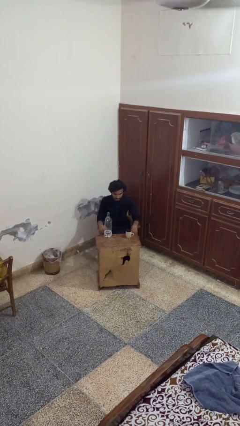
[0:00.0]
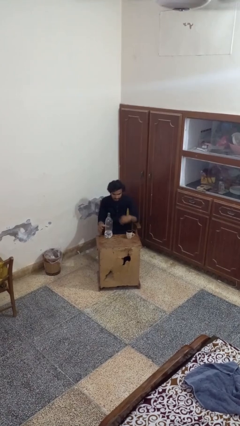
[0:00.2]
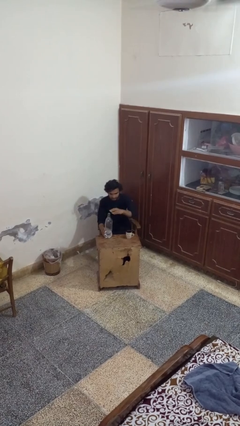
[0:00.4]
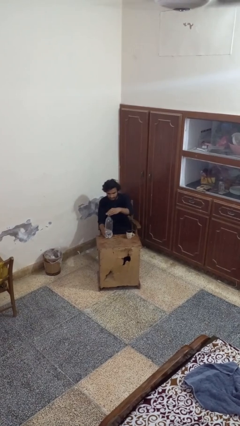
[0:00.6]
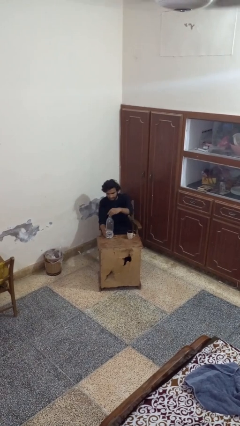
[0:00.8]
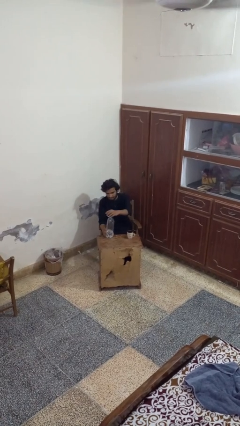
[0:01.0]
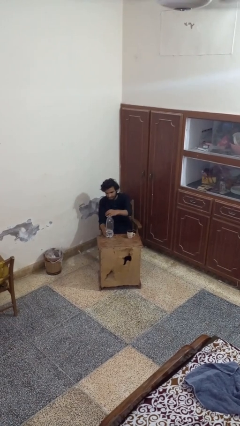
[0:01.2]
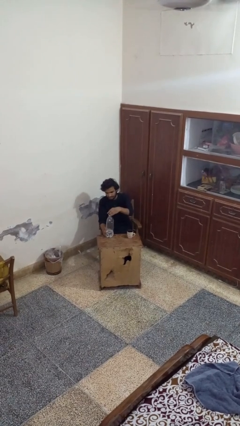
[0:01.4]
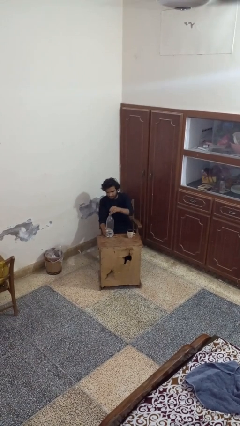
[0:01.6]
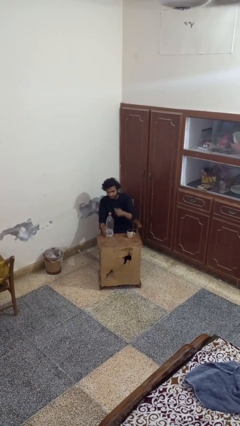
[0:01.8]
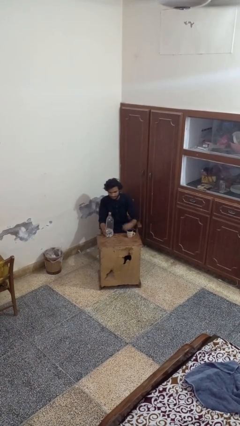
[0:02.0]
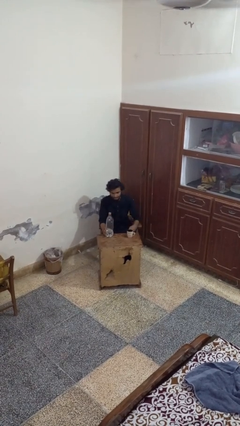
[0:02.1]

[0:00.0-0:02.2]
person unscrews lid from bottle

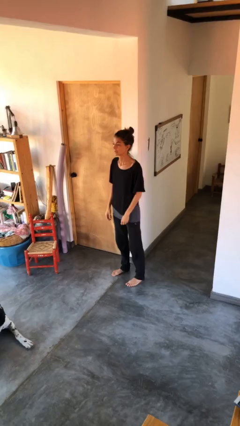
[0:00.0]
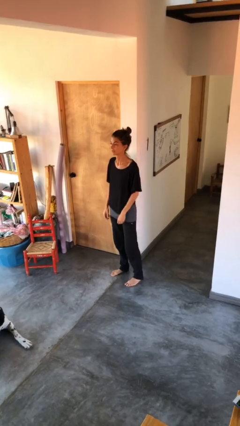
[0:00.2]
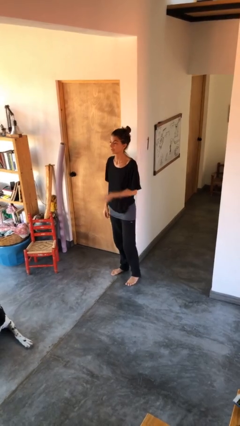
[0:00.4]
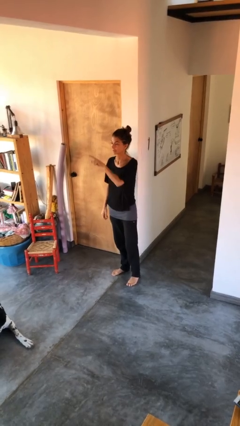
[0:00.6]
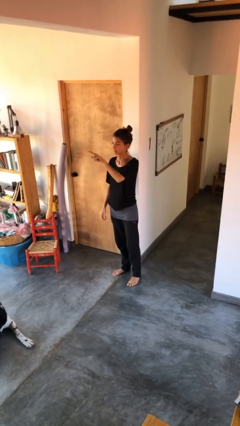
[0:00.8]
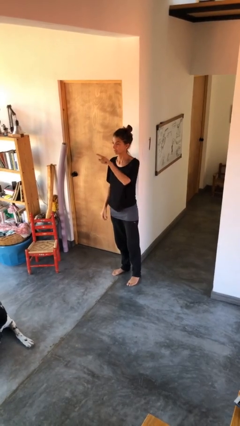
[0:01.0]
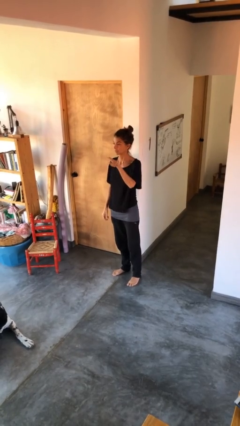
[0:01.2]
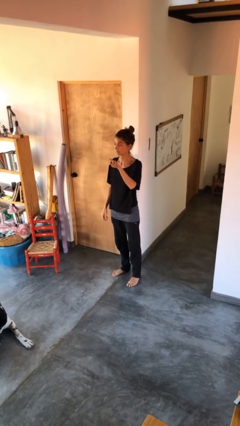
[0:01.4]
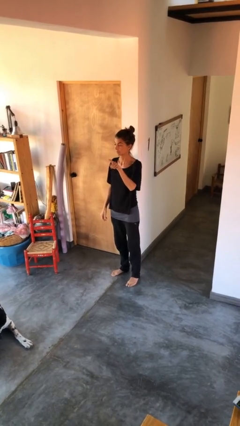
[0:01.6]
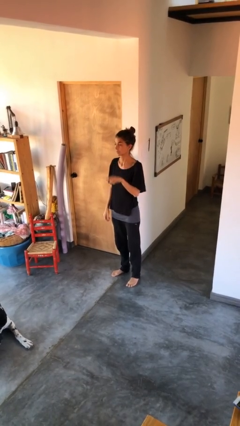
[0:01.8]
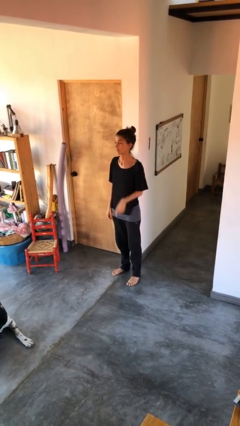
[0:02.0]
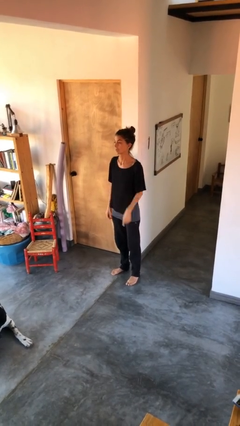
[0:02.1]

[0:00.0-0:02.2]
person gestures swipe left

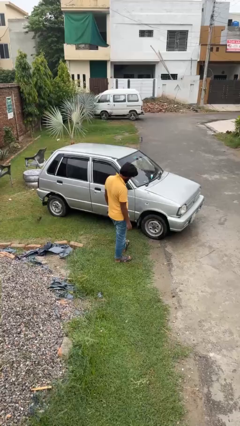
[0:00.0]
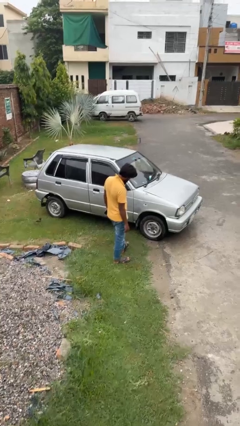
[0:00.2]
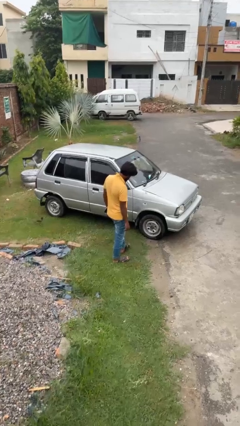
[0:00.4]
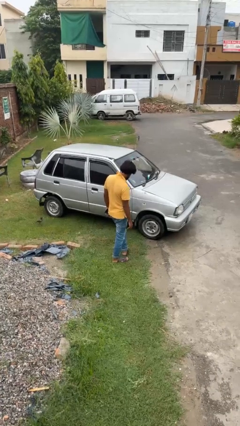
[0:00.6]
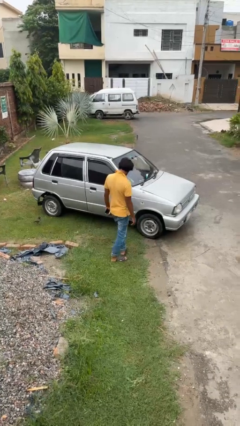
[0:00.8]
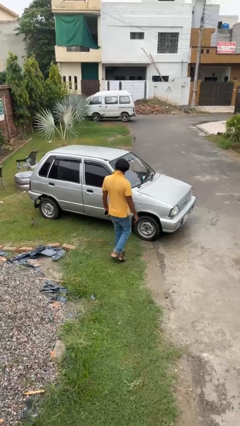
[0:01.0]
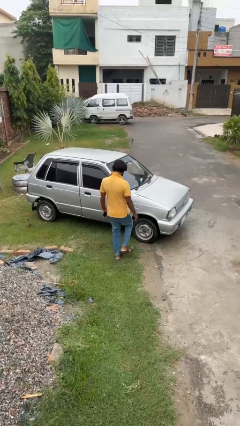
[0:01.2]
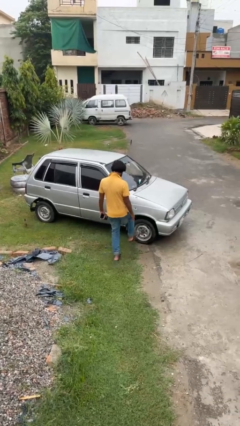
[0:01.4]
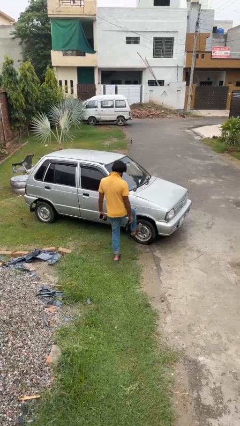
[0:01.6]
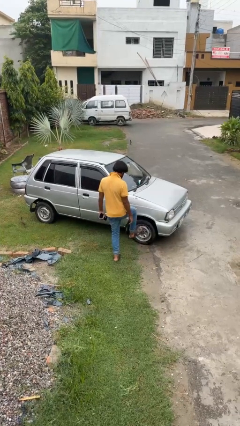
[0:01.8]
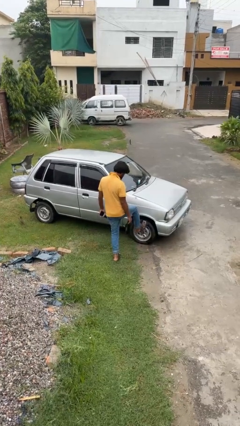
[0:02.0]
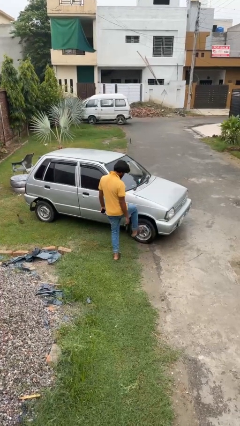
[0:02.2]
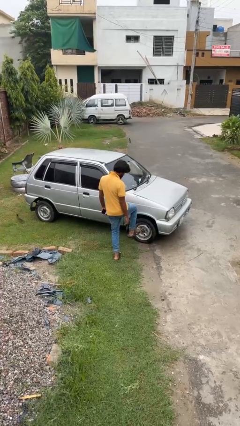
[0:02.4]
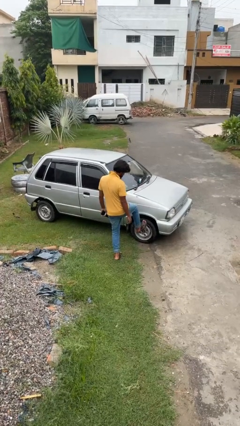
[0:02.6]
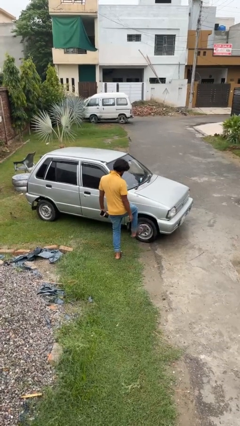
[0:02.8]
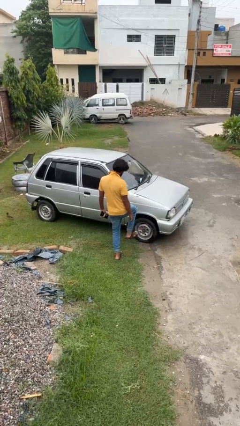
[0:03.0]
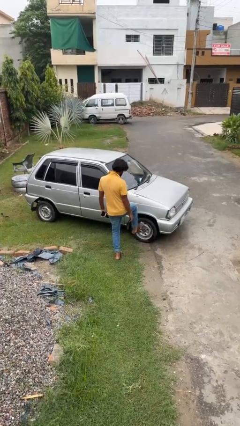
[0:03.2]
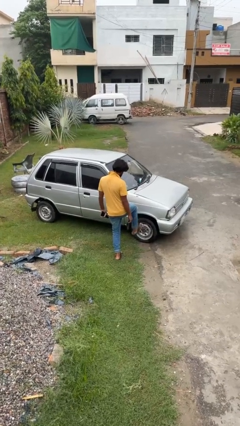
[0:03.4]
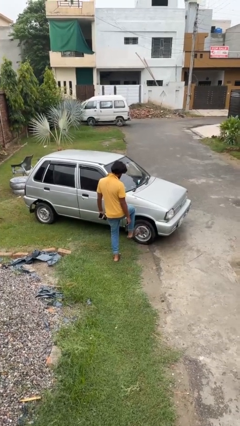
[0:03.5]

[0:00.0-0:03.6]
person kicks car tires

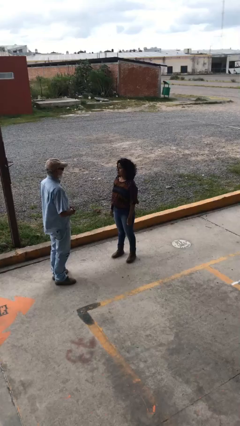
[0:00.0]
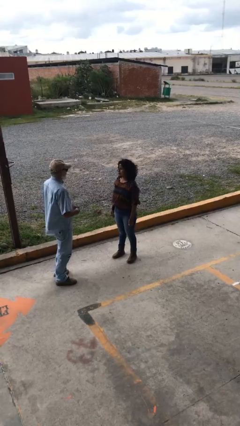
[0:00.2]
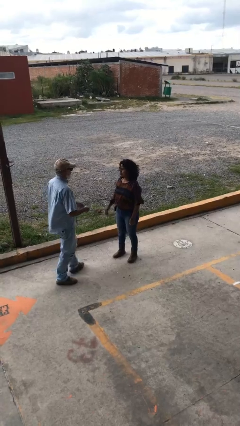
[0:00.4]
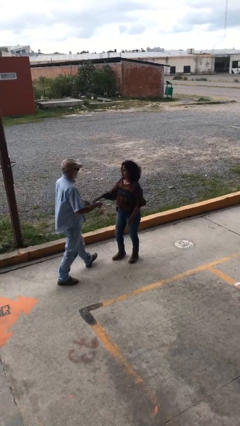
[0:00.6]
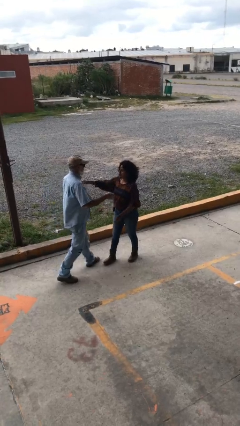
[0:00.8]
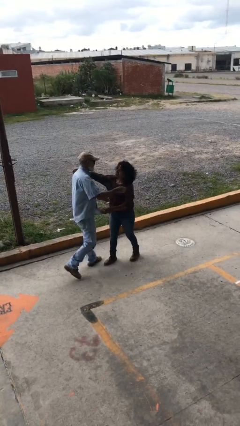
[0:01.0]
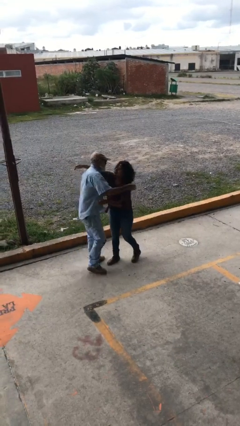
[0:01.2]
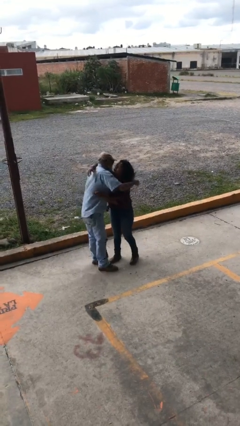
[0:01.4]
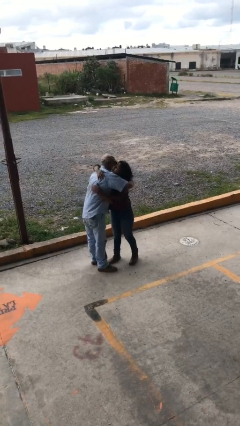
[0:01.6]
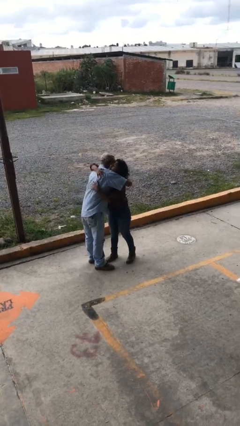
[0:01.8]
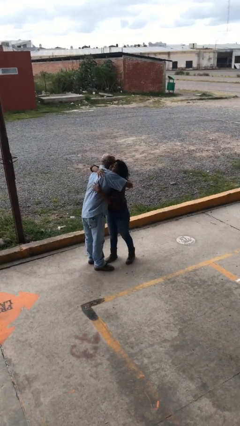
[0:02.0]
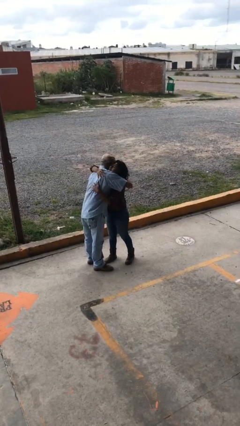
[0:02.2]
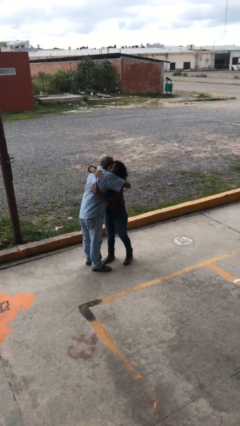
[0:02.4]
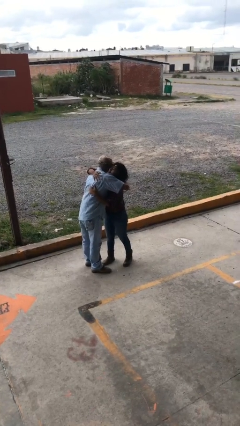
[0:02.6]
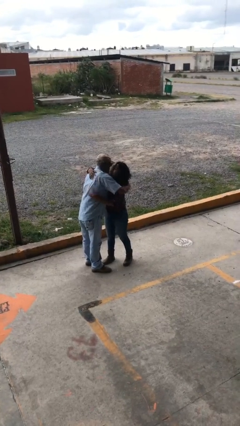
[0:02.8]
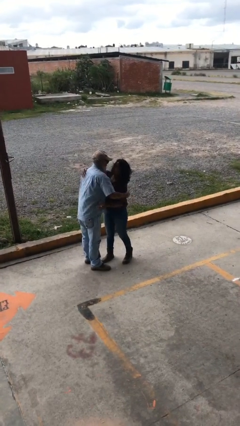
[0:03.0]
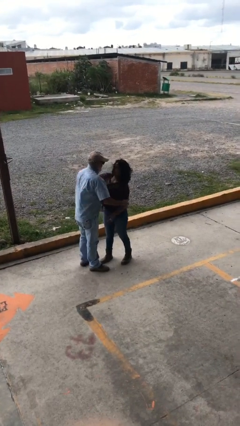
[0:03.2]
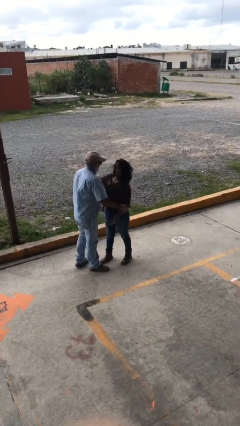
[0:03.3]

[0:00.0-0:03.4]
person embraces person

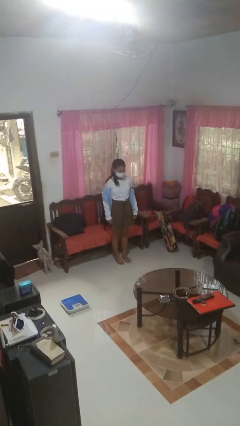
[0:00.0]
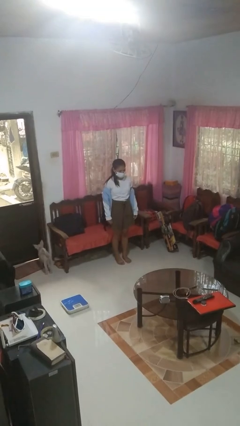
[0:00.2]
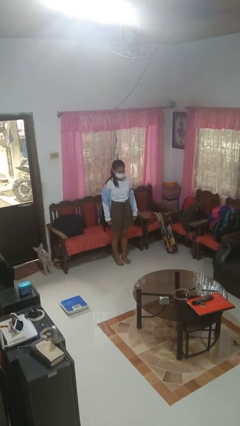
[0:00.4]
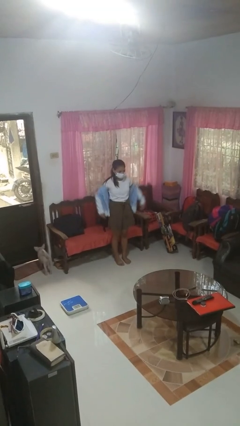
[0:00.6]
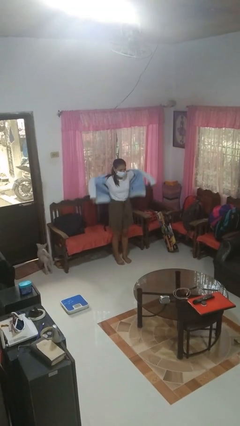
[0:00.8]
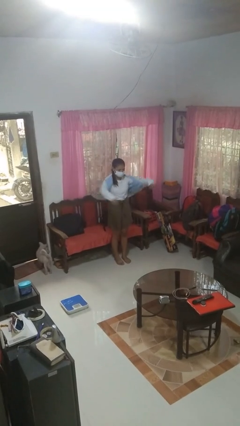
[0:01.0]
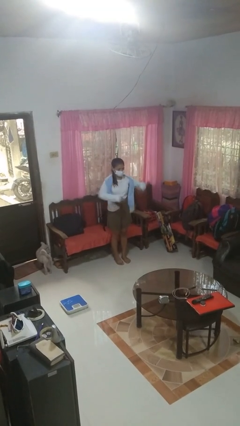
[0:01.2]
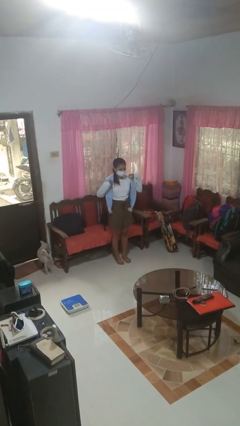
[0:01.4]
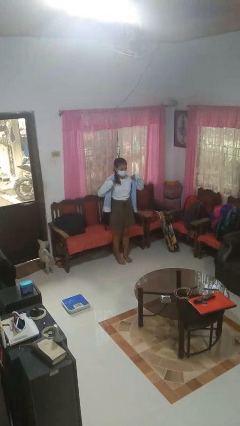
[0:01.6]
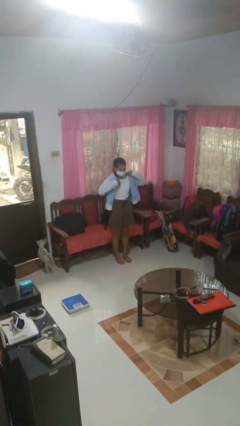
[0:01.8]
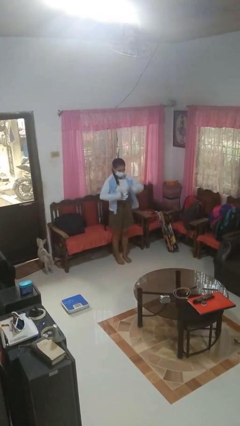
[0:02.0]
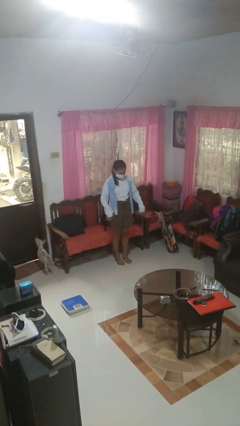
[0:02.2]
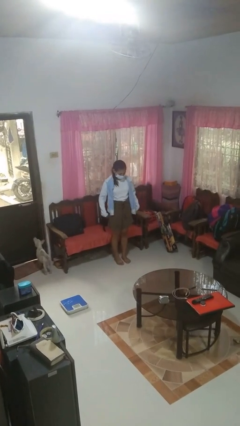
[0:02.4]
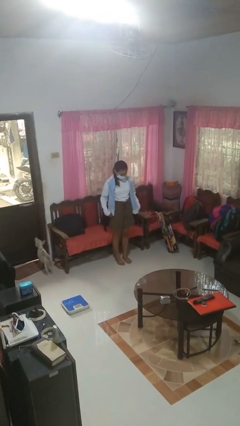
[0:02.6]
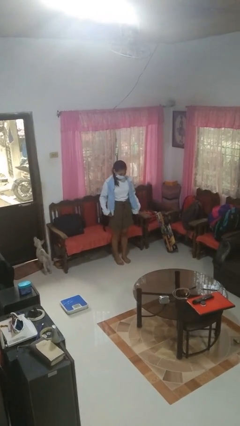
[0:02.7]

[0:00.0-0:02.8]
person puts on jacket

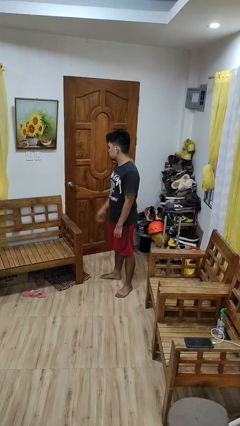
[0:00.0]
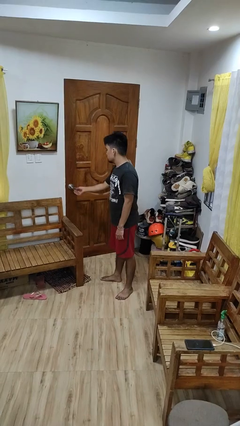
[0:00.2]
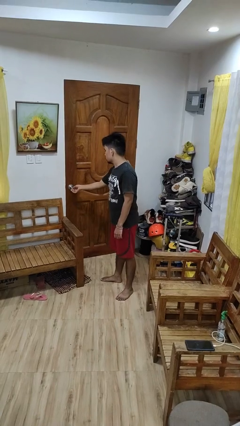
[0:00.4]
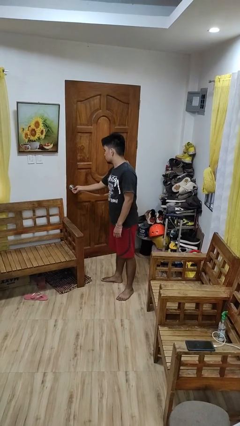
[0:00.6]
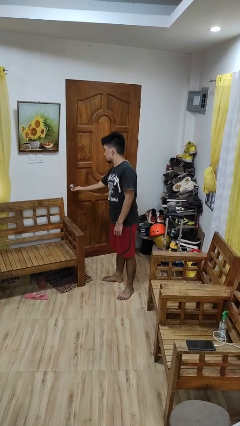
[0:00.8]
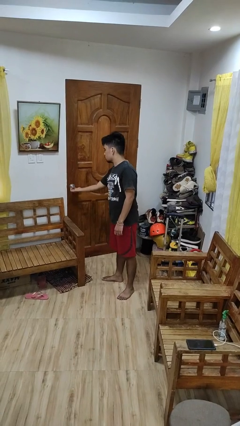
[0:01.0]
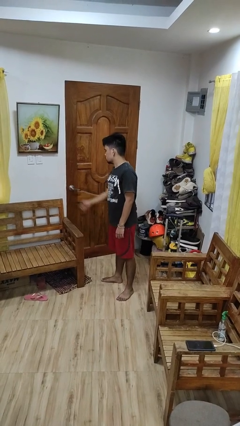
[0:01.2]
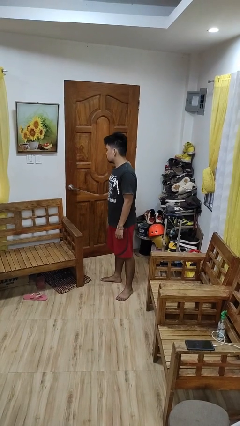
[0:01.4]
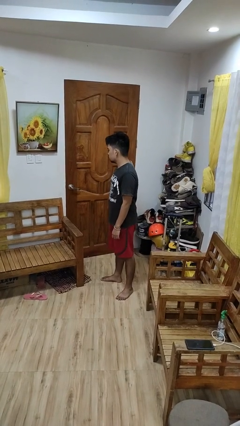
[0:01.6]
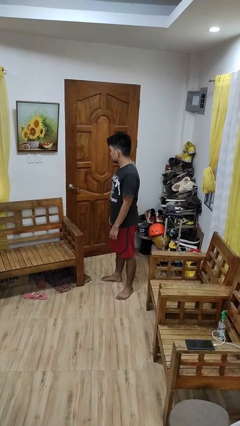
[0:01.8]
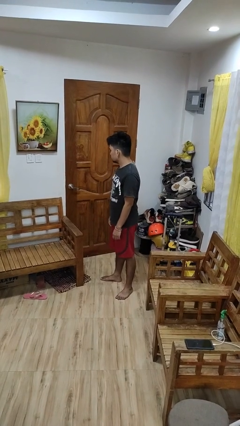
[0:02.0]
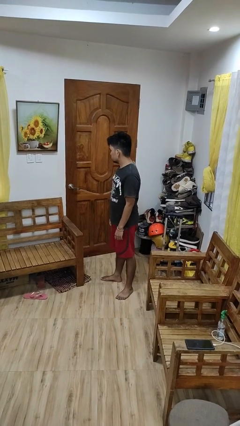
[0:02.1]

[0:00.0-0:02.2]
person unlocks door with keys

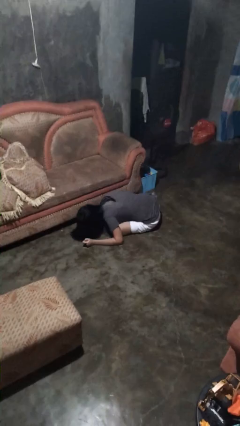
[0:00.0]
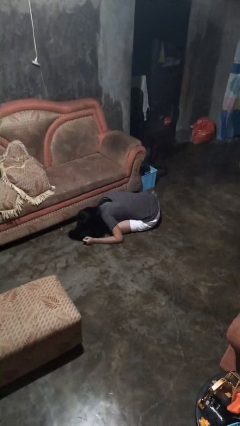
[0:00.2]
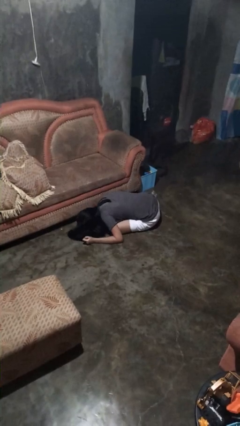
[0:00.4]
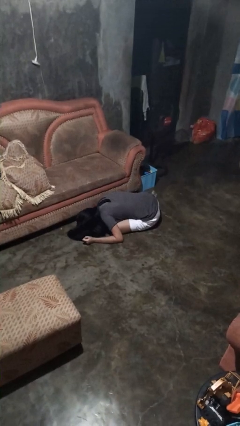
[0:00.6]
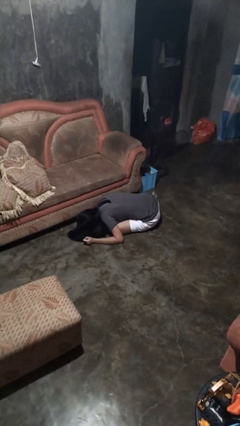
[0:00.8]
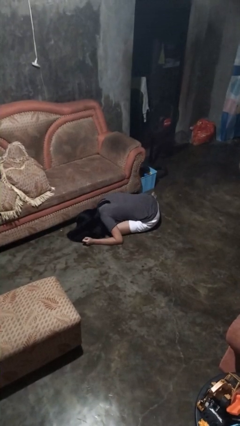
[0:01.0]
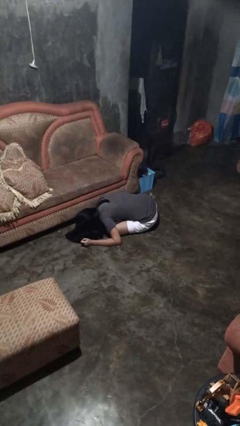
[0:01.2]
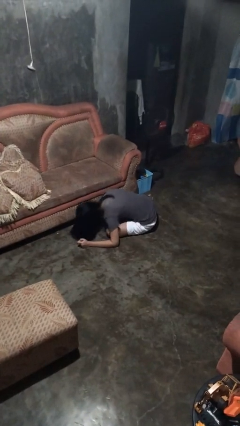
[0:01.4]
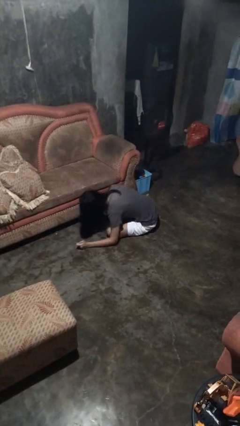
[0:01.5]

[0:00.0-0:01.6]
person searches under couch
